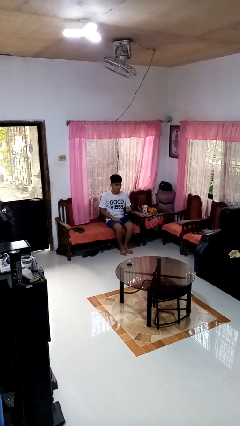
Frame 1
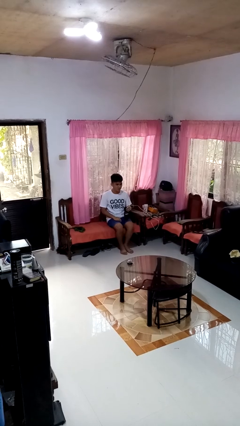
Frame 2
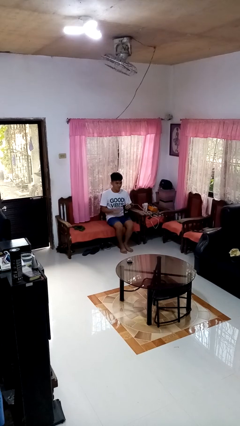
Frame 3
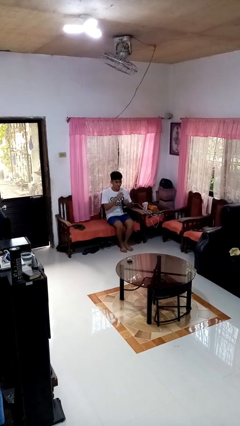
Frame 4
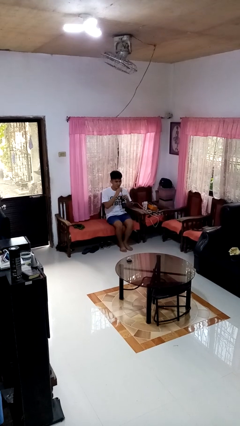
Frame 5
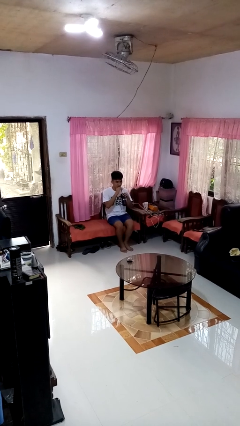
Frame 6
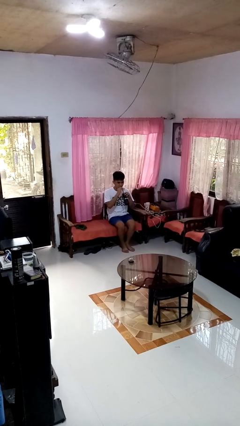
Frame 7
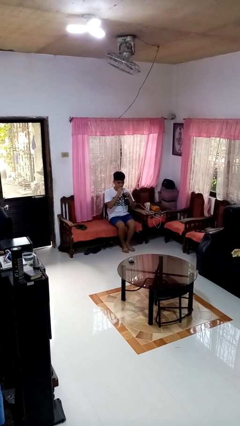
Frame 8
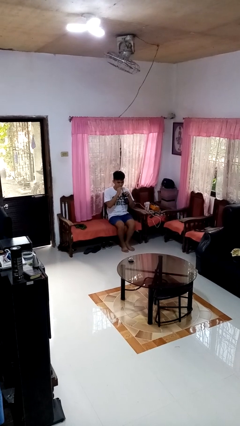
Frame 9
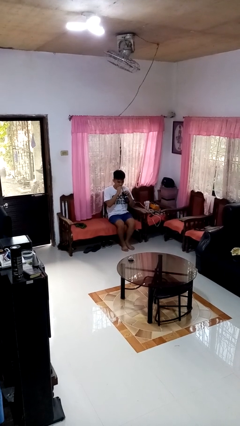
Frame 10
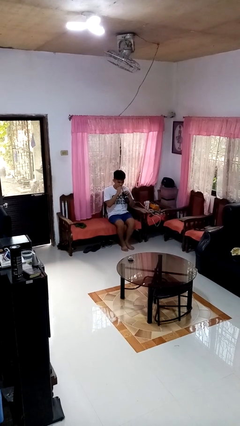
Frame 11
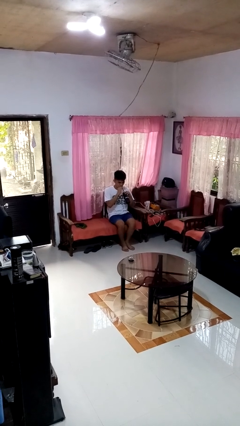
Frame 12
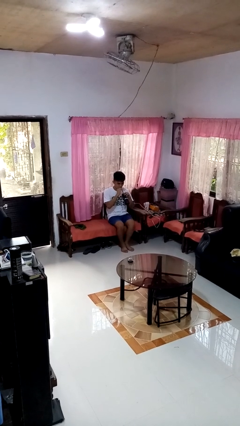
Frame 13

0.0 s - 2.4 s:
person drinks from straw

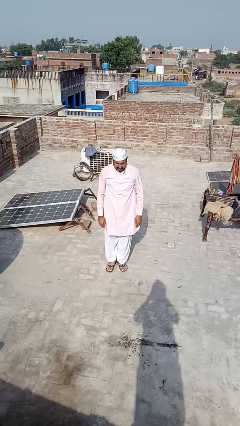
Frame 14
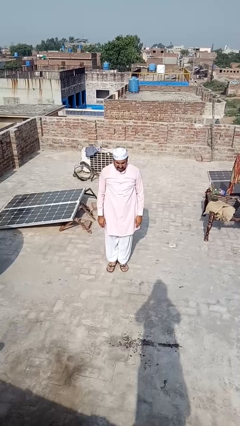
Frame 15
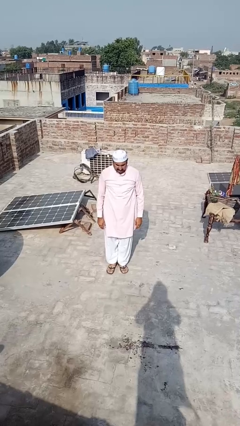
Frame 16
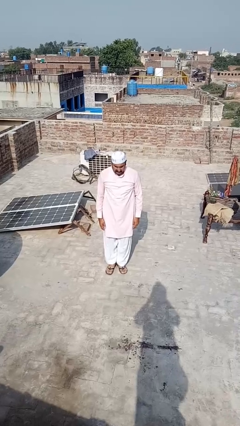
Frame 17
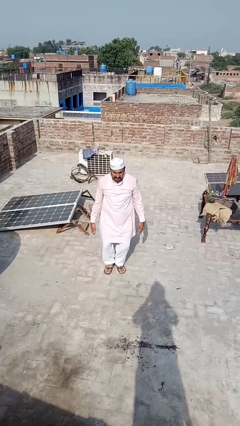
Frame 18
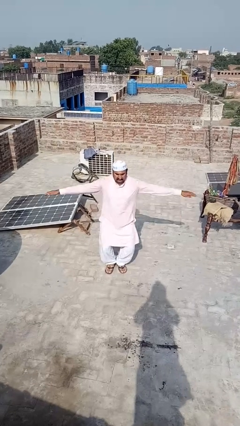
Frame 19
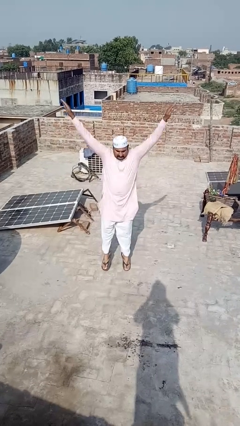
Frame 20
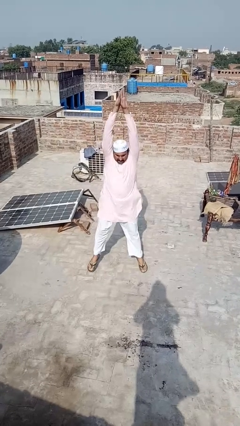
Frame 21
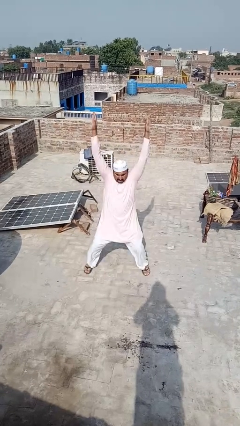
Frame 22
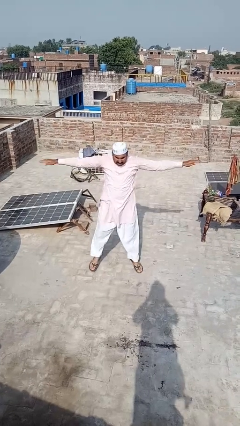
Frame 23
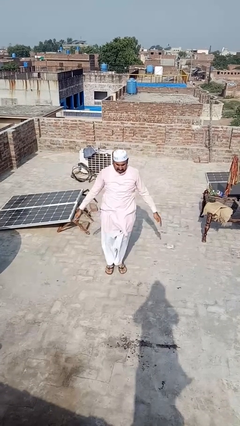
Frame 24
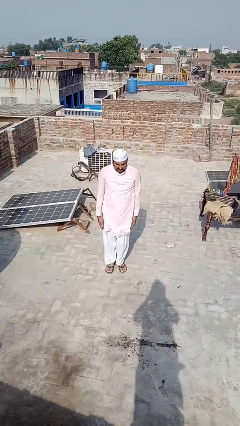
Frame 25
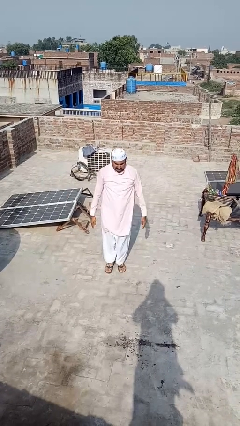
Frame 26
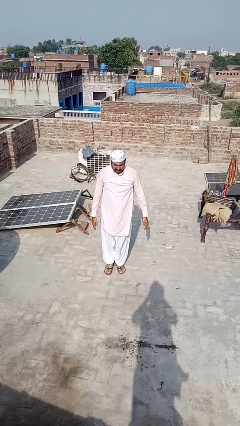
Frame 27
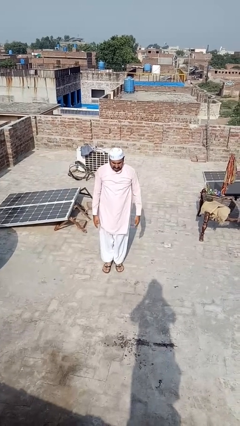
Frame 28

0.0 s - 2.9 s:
person exercises with jumping jacks

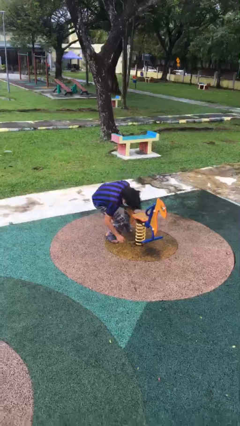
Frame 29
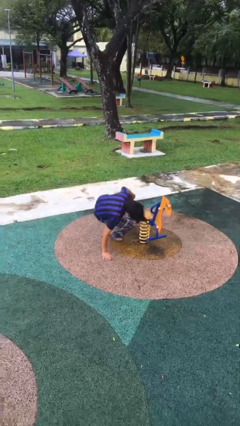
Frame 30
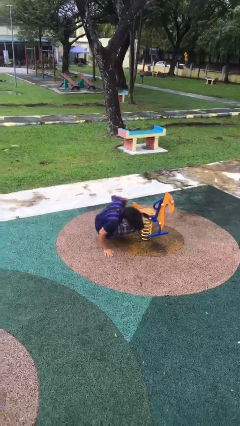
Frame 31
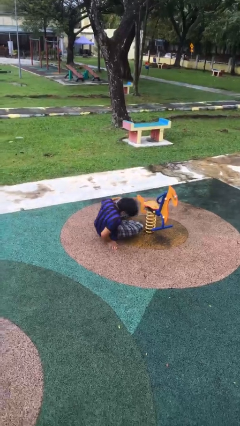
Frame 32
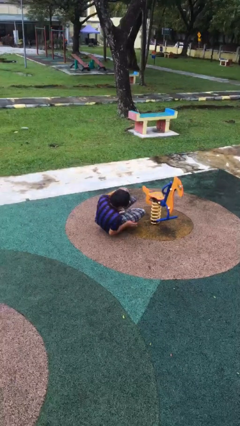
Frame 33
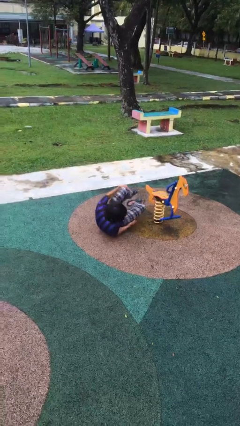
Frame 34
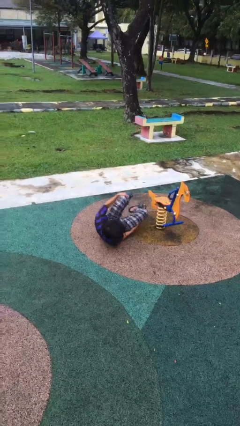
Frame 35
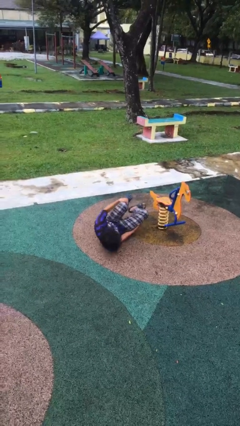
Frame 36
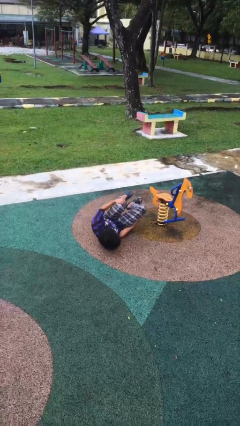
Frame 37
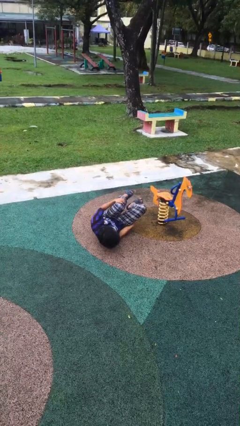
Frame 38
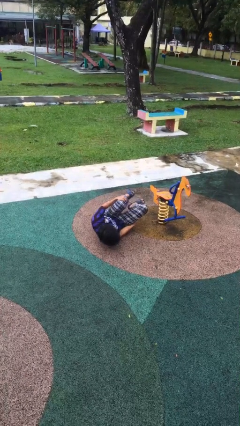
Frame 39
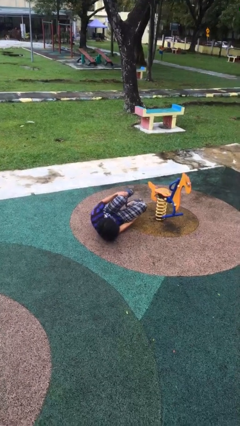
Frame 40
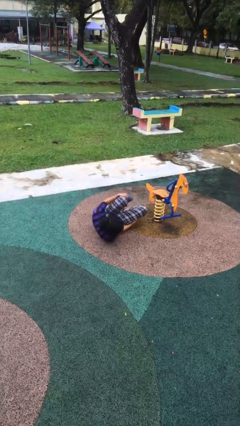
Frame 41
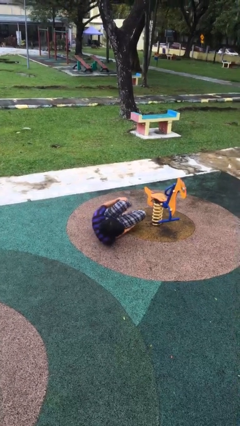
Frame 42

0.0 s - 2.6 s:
person lies down on floor

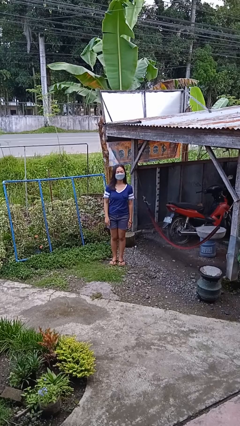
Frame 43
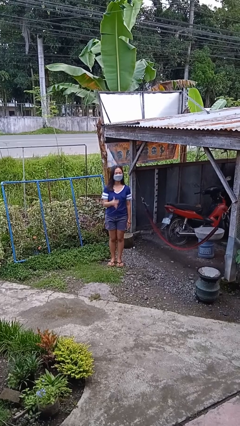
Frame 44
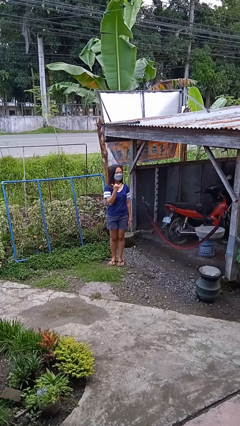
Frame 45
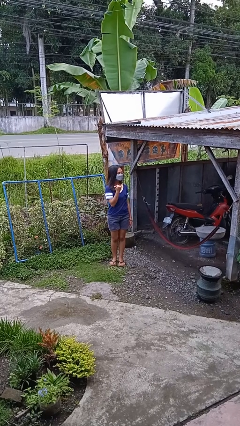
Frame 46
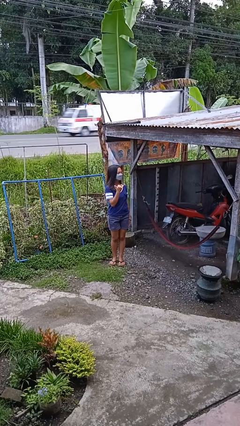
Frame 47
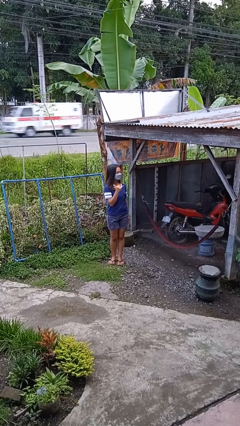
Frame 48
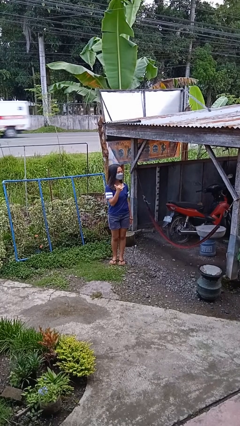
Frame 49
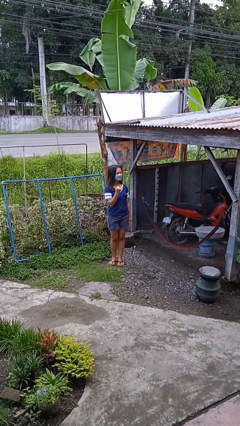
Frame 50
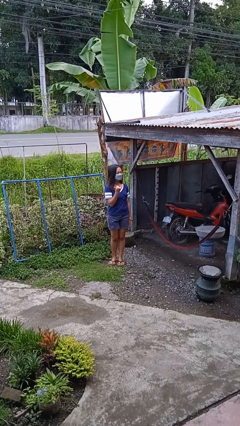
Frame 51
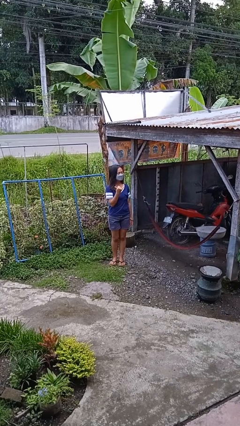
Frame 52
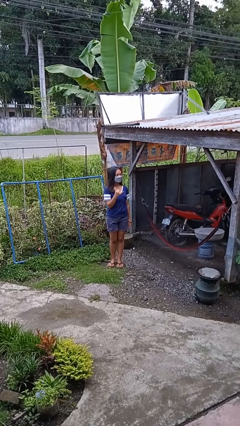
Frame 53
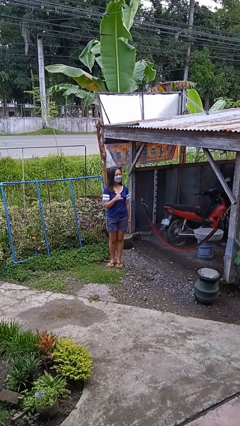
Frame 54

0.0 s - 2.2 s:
person gestures hang loose

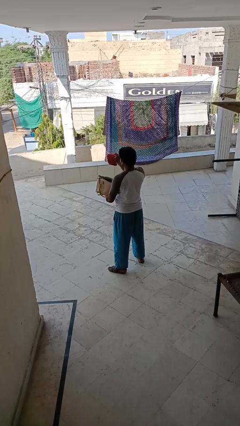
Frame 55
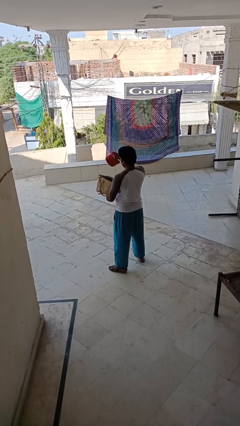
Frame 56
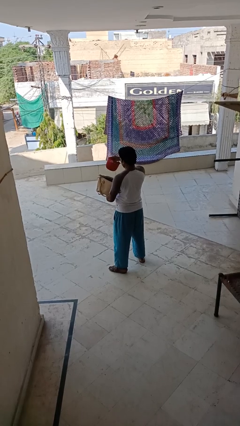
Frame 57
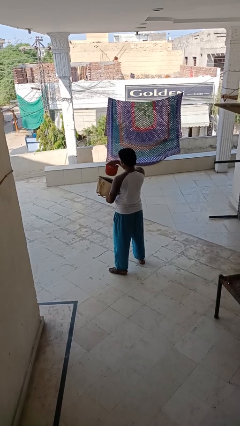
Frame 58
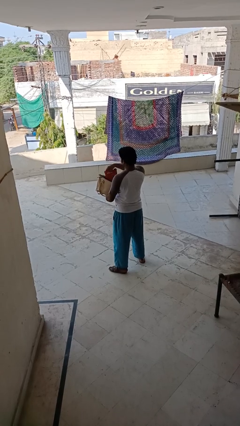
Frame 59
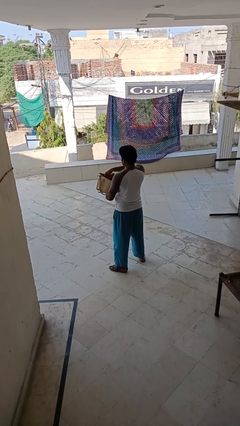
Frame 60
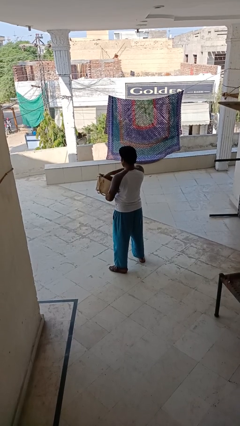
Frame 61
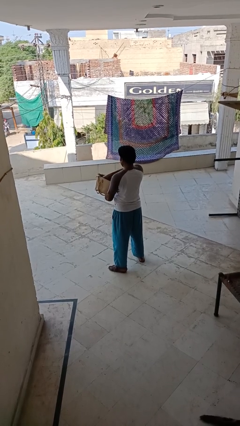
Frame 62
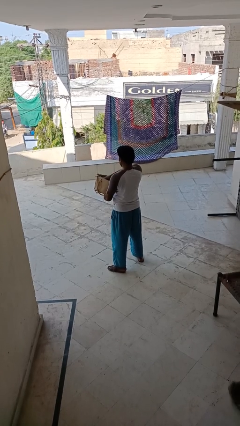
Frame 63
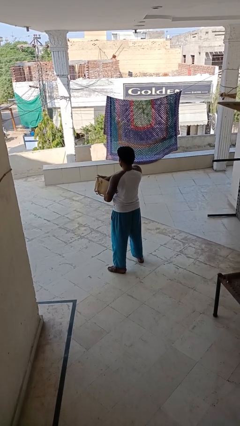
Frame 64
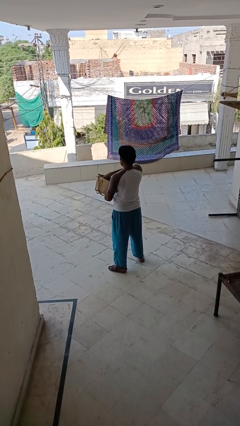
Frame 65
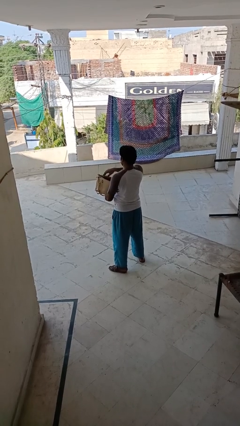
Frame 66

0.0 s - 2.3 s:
person puts object into purse

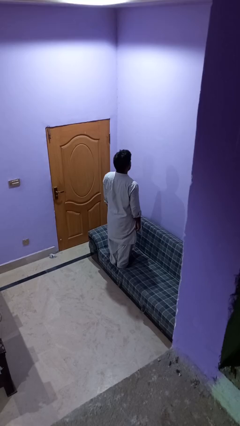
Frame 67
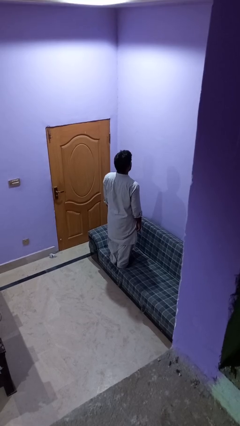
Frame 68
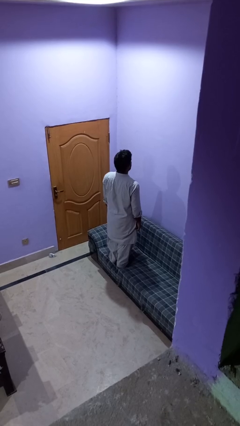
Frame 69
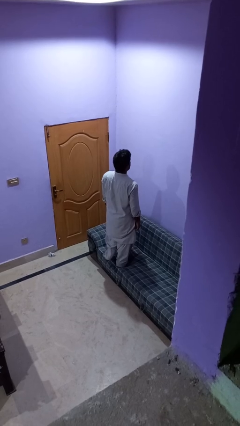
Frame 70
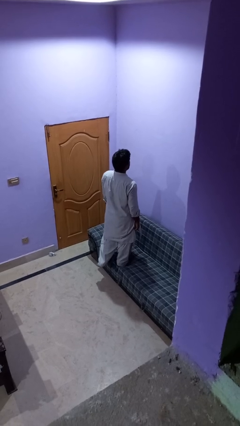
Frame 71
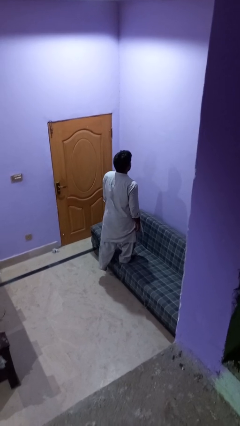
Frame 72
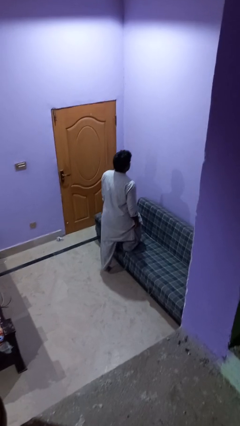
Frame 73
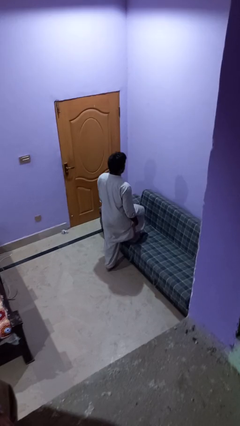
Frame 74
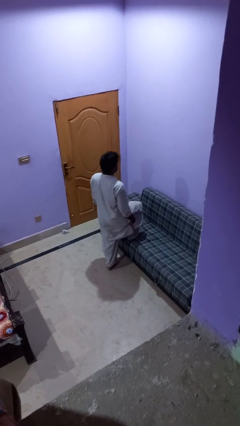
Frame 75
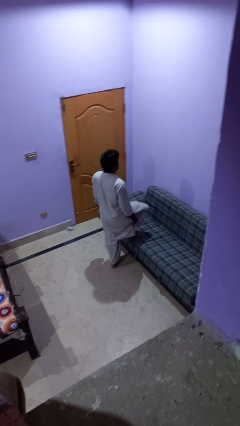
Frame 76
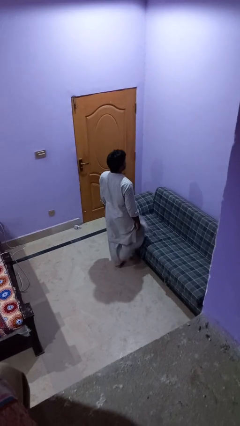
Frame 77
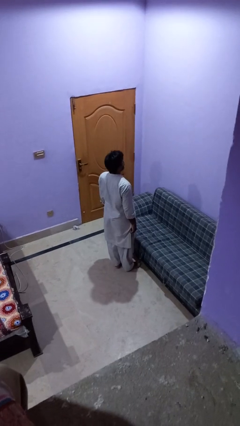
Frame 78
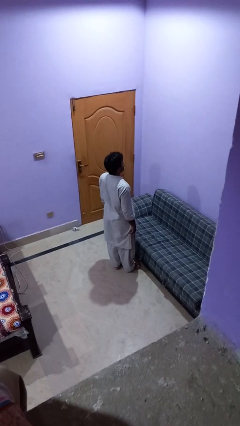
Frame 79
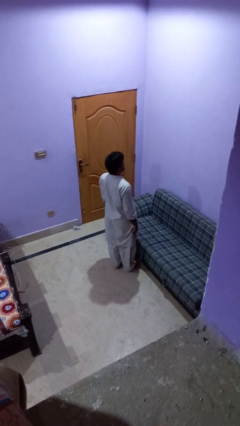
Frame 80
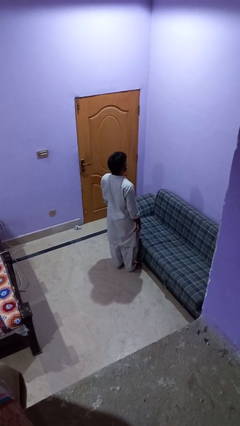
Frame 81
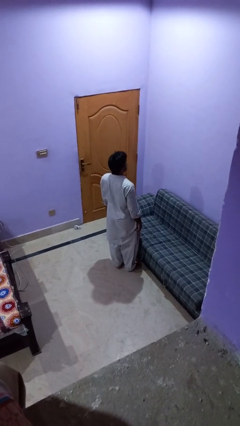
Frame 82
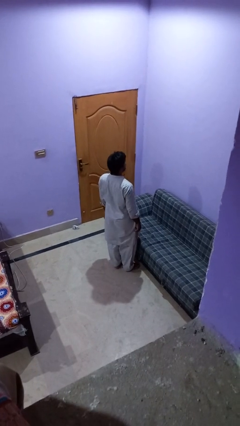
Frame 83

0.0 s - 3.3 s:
person climbs off couch

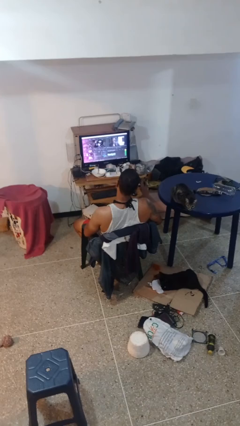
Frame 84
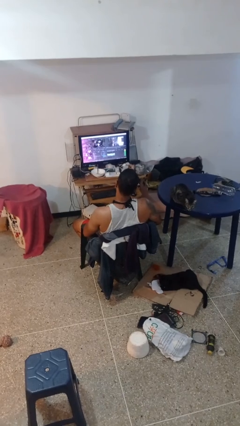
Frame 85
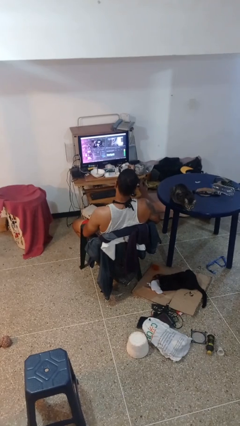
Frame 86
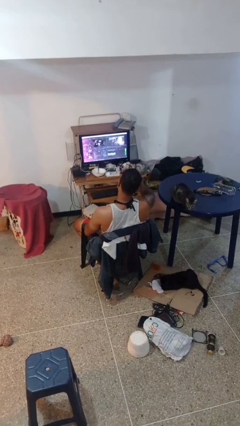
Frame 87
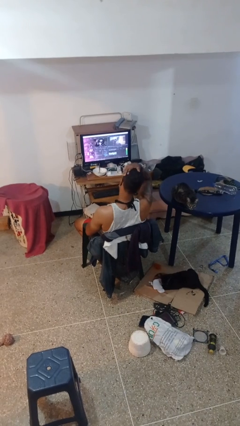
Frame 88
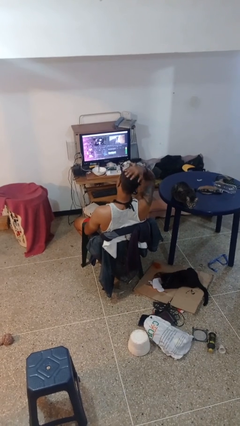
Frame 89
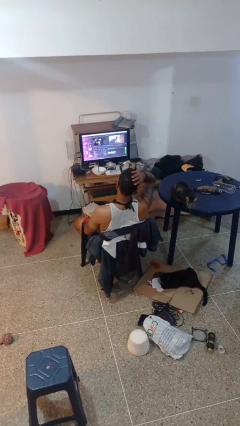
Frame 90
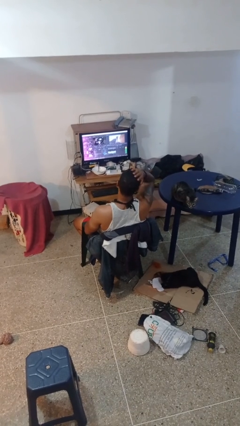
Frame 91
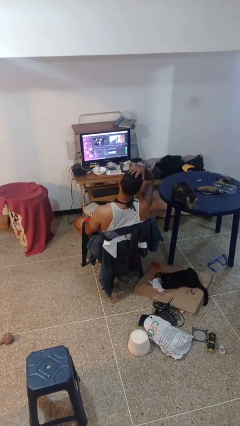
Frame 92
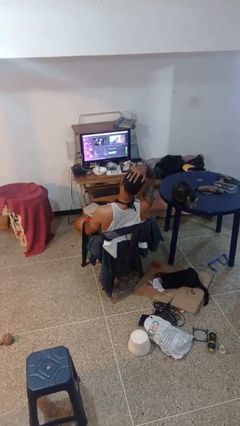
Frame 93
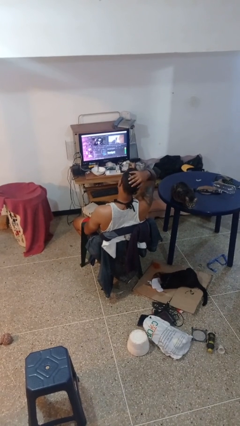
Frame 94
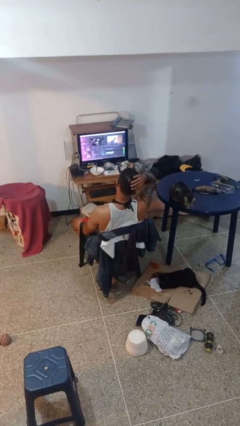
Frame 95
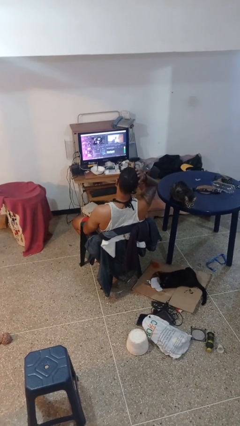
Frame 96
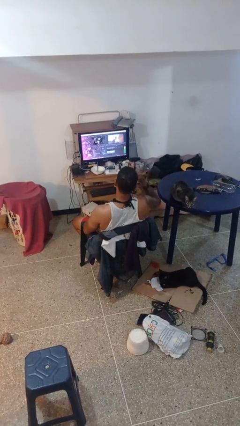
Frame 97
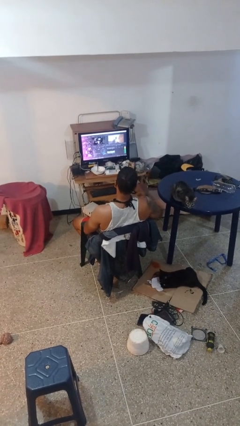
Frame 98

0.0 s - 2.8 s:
person strokes hair
